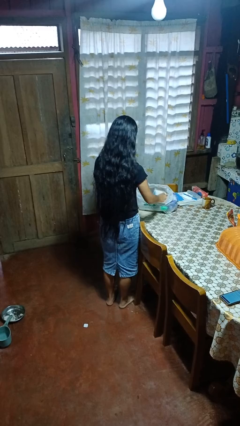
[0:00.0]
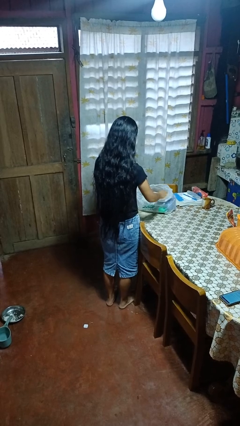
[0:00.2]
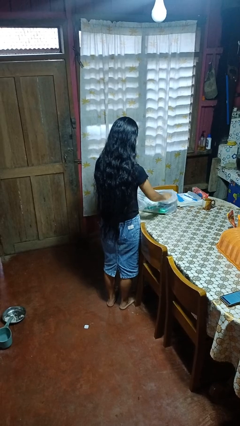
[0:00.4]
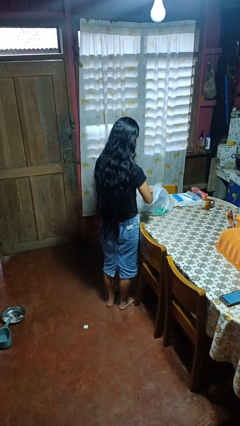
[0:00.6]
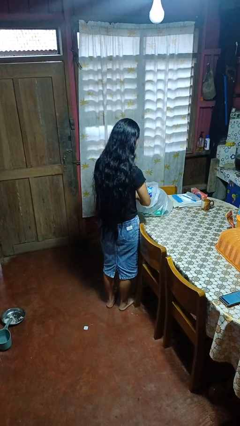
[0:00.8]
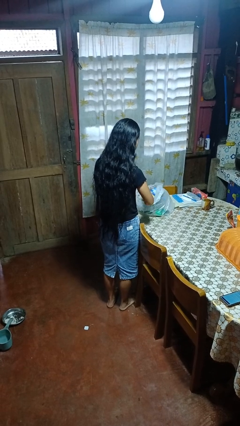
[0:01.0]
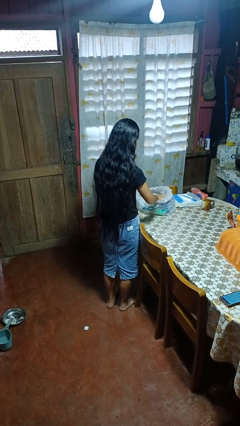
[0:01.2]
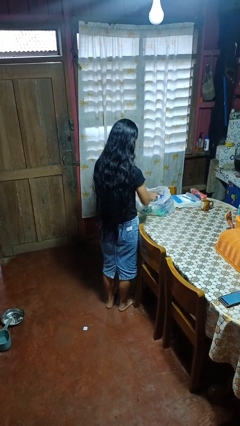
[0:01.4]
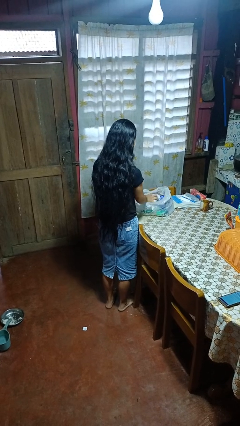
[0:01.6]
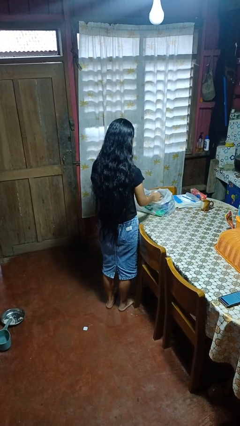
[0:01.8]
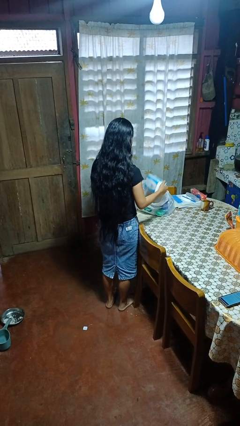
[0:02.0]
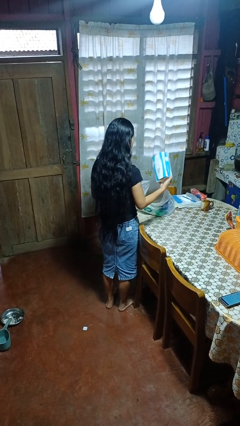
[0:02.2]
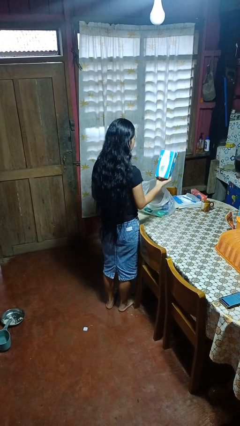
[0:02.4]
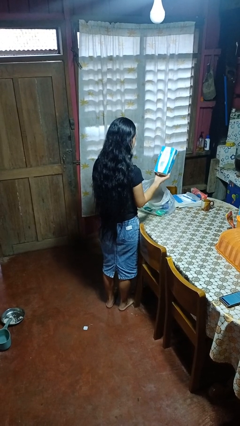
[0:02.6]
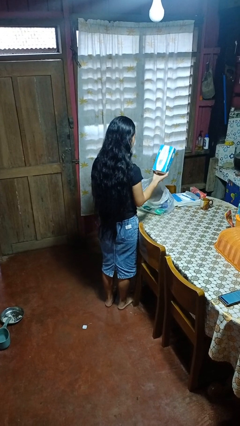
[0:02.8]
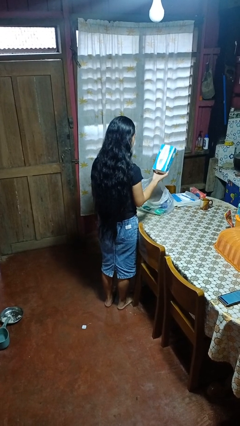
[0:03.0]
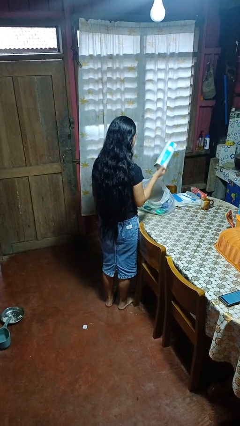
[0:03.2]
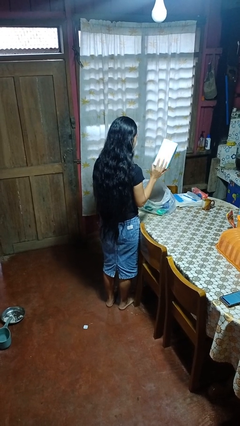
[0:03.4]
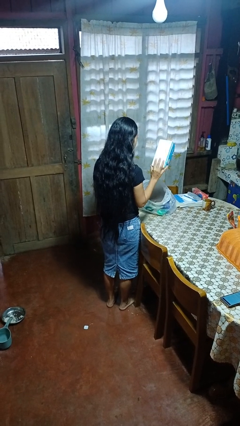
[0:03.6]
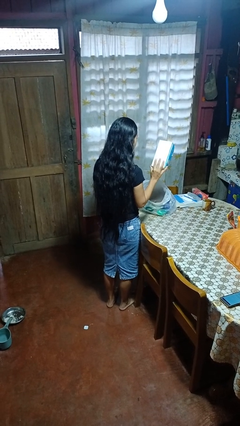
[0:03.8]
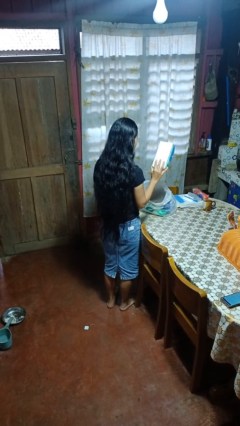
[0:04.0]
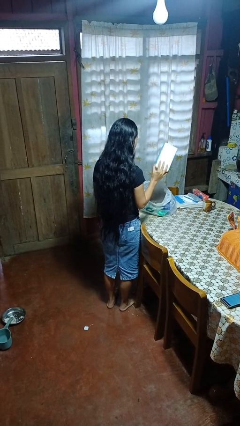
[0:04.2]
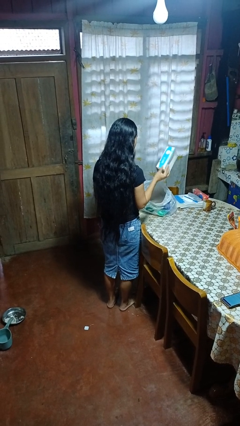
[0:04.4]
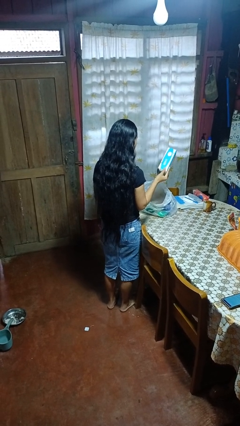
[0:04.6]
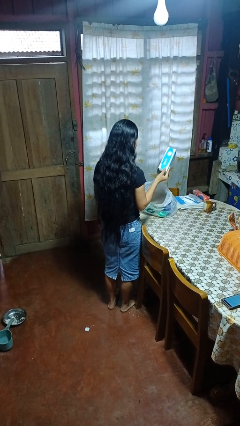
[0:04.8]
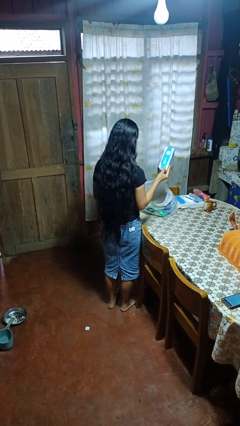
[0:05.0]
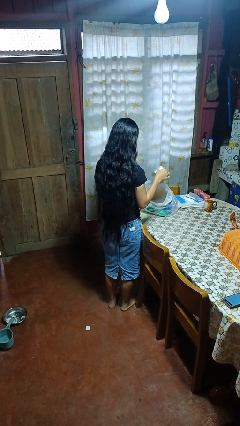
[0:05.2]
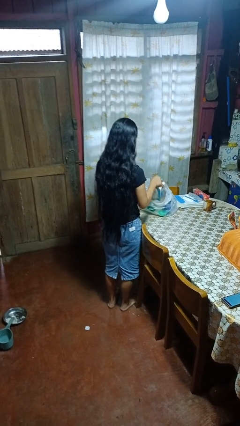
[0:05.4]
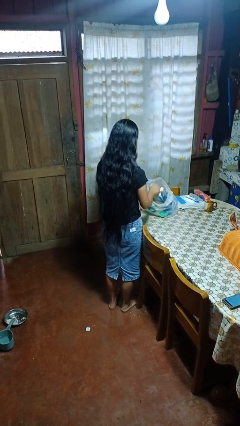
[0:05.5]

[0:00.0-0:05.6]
person takes object from bag

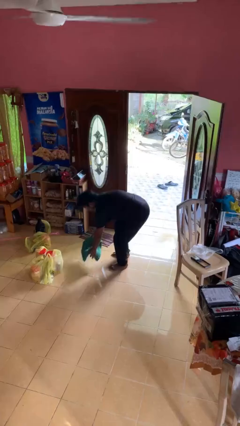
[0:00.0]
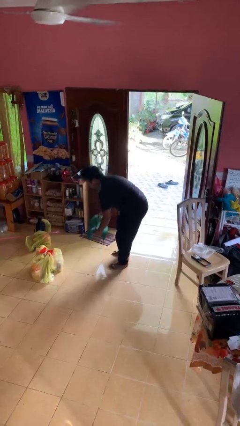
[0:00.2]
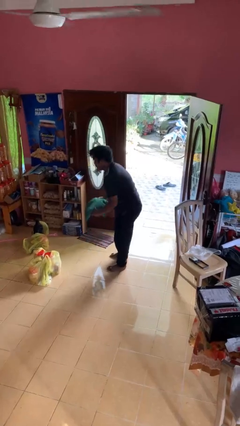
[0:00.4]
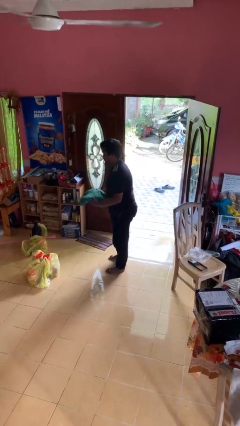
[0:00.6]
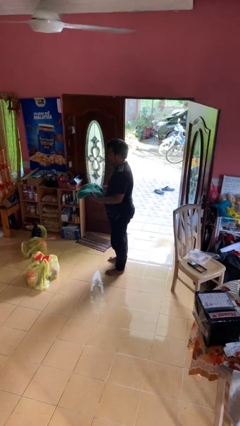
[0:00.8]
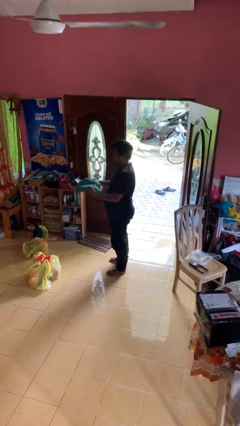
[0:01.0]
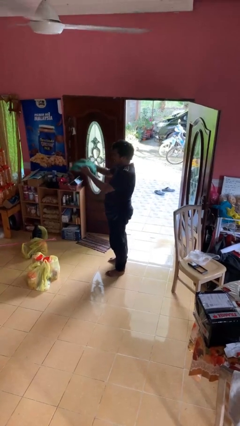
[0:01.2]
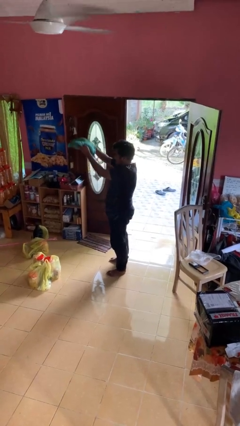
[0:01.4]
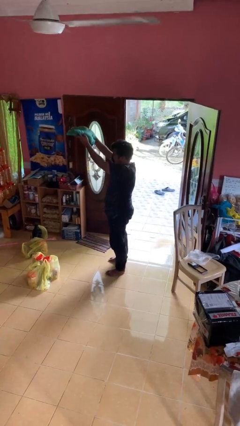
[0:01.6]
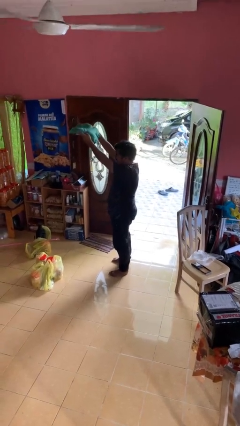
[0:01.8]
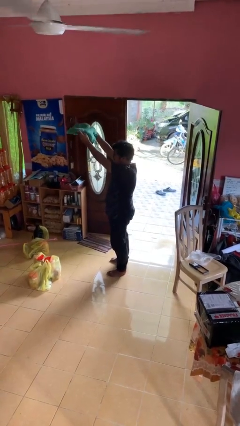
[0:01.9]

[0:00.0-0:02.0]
person picks up object from floor

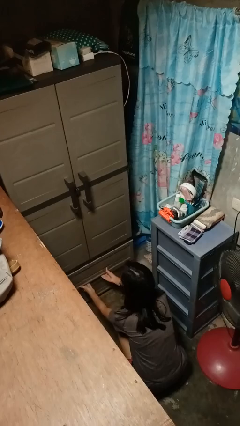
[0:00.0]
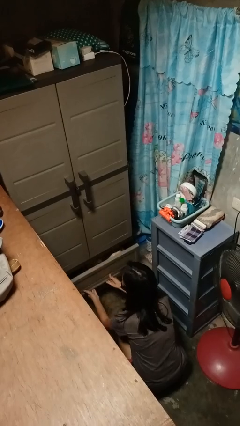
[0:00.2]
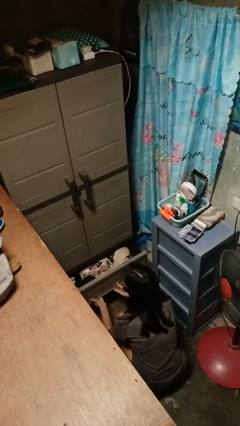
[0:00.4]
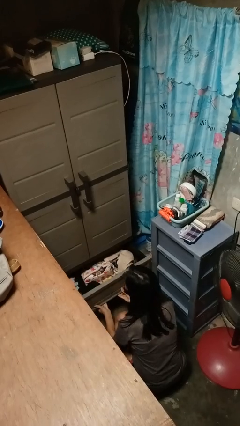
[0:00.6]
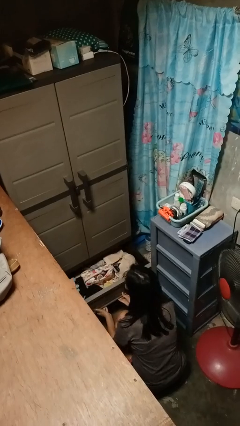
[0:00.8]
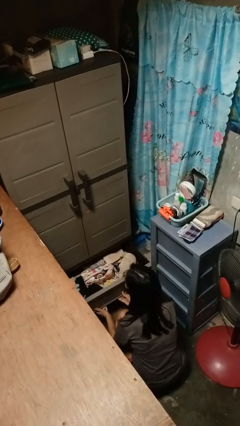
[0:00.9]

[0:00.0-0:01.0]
person opens dresser drawer

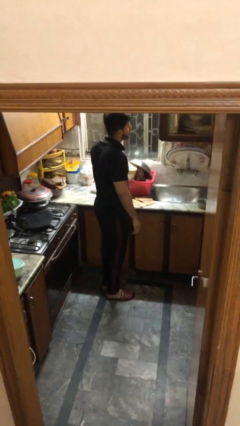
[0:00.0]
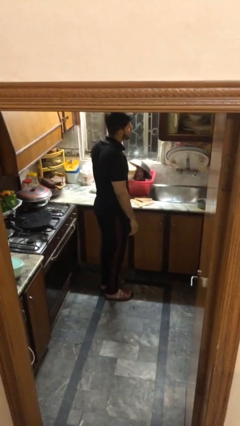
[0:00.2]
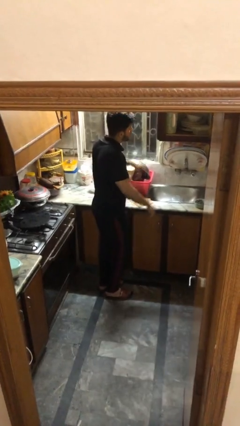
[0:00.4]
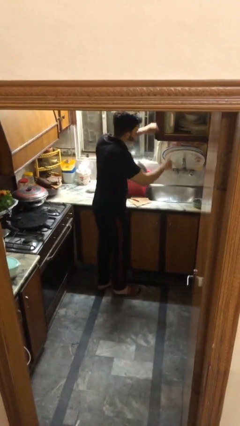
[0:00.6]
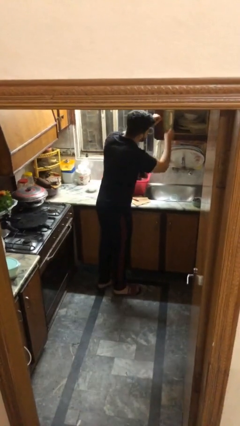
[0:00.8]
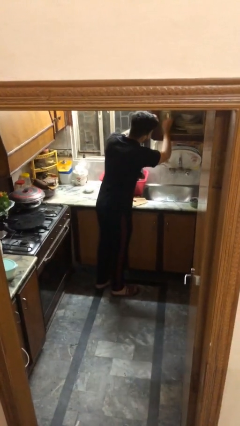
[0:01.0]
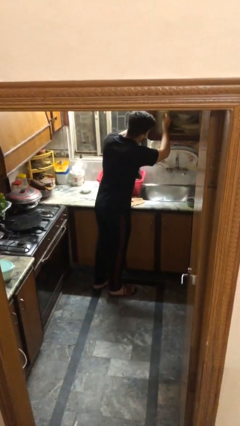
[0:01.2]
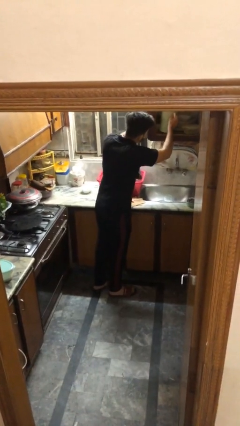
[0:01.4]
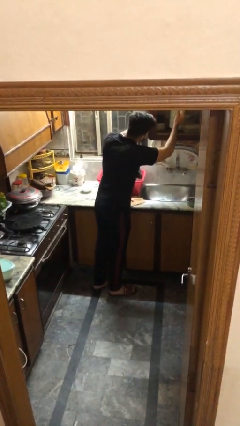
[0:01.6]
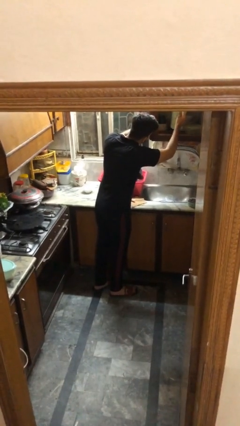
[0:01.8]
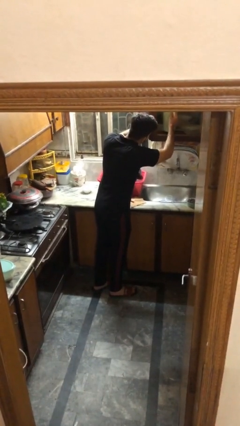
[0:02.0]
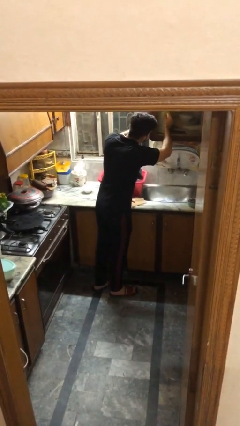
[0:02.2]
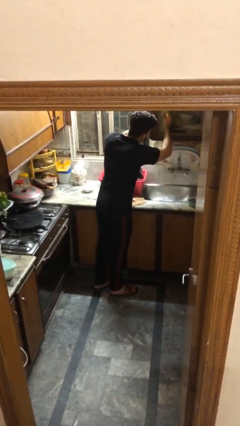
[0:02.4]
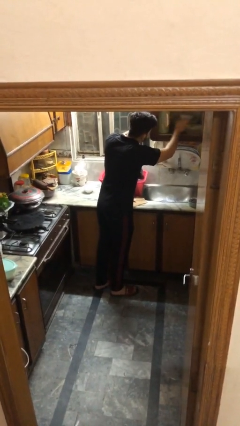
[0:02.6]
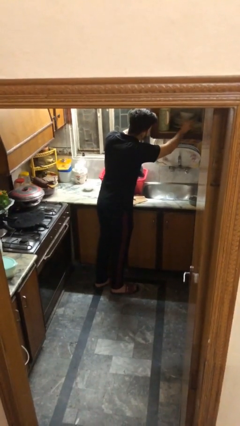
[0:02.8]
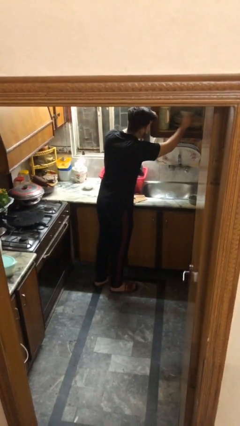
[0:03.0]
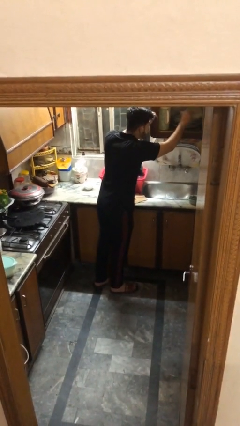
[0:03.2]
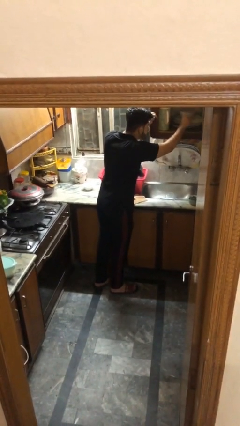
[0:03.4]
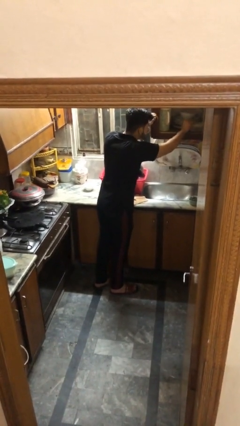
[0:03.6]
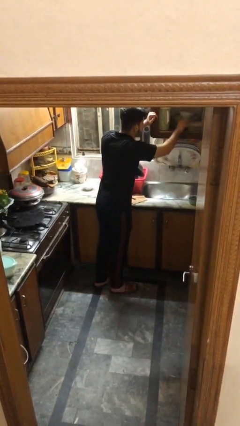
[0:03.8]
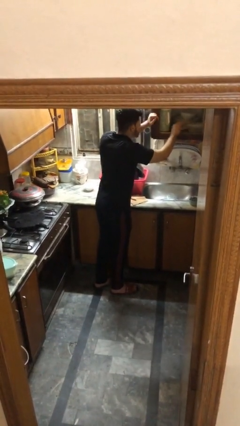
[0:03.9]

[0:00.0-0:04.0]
person searches in kitchen drawer

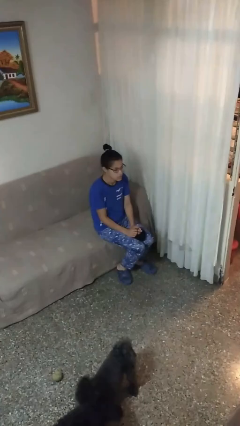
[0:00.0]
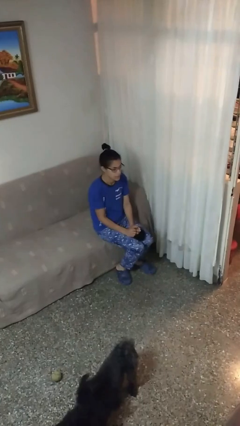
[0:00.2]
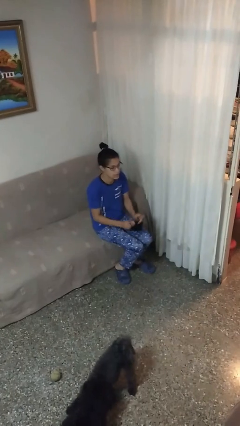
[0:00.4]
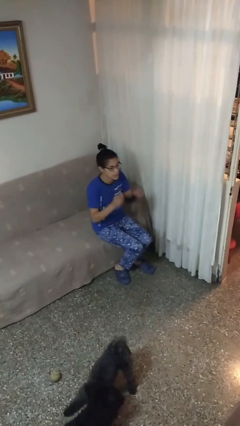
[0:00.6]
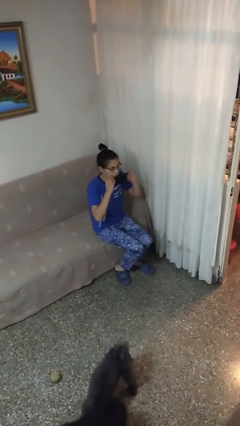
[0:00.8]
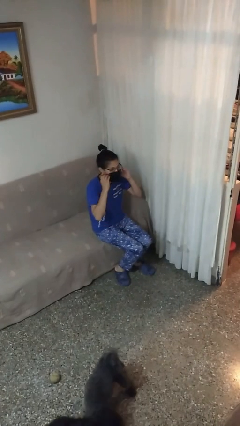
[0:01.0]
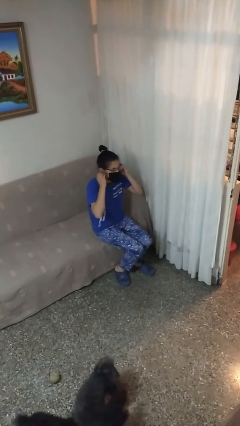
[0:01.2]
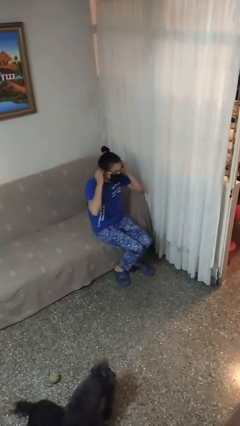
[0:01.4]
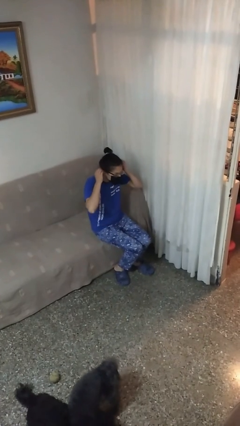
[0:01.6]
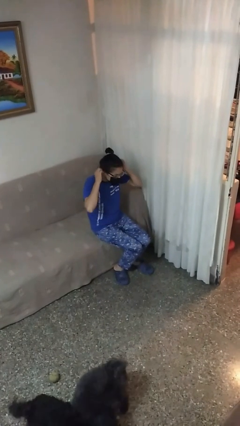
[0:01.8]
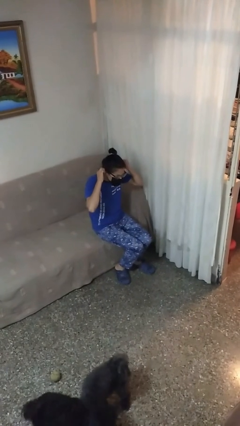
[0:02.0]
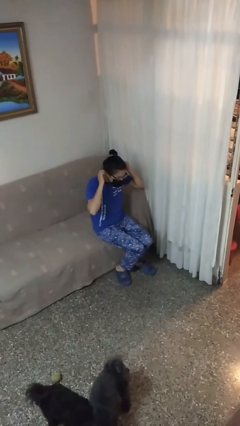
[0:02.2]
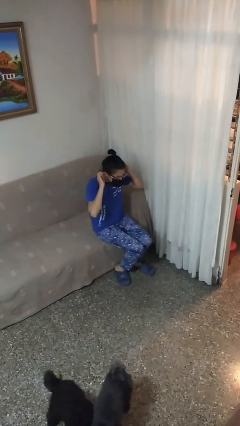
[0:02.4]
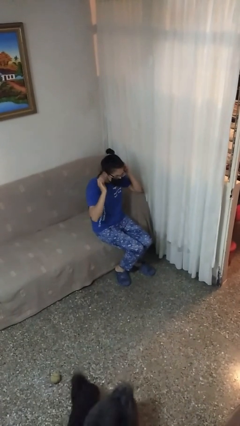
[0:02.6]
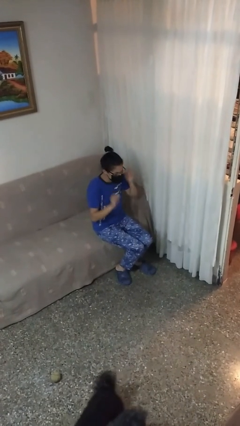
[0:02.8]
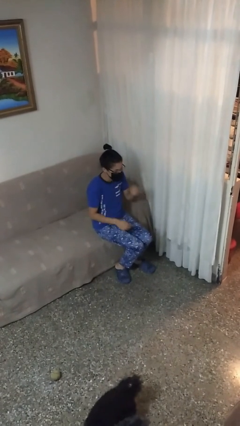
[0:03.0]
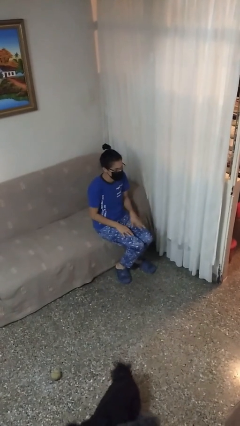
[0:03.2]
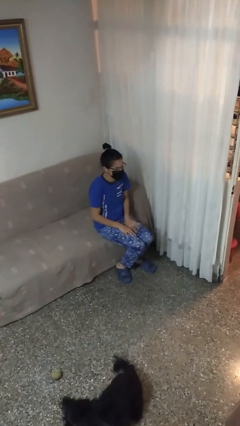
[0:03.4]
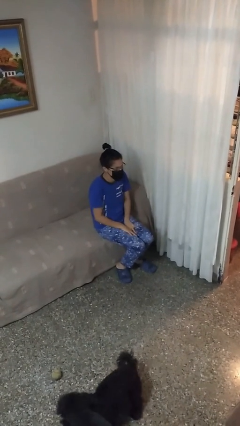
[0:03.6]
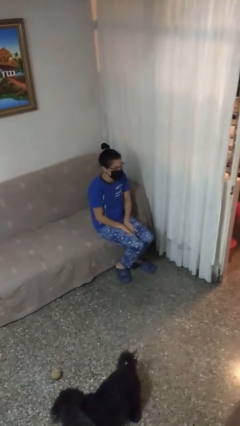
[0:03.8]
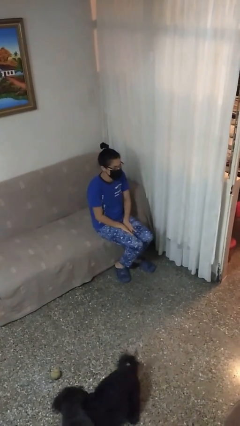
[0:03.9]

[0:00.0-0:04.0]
person puts on facemask

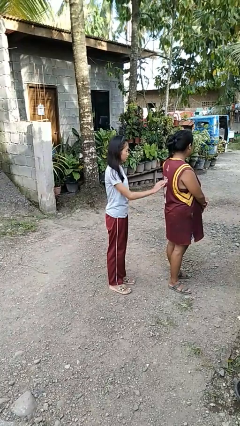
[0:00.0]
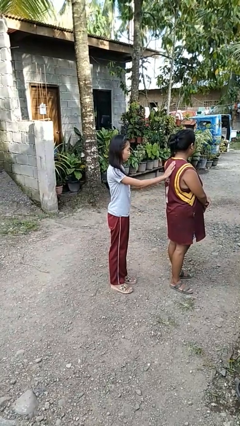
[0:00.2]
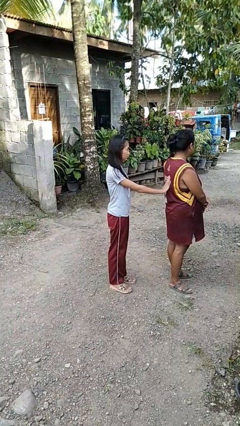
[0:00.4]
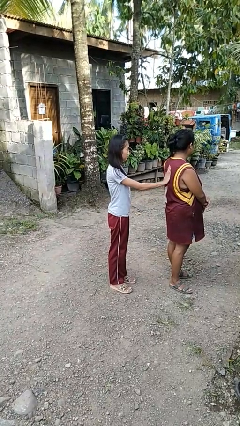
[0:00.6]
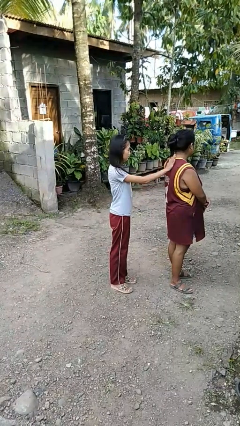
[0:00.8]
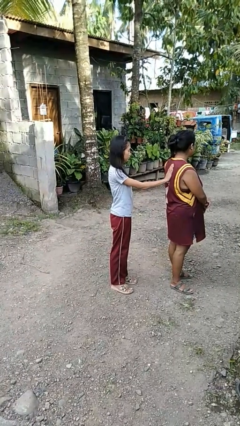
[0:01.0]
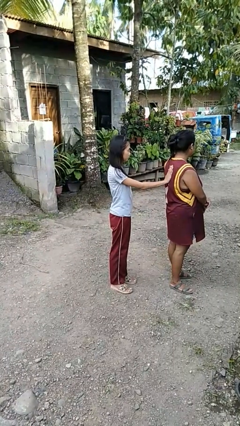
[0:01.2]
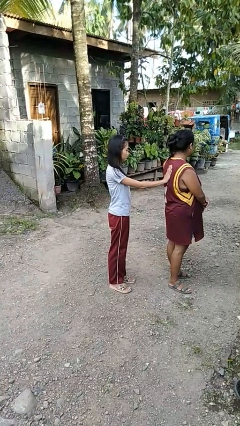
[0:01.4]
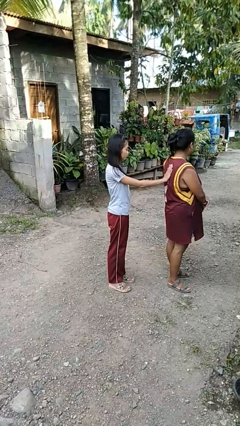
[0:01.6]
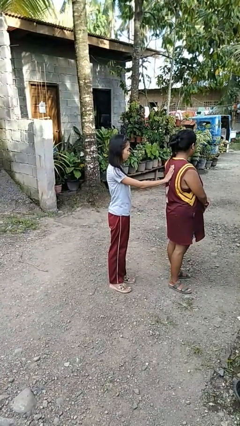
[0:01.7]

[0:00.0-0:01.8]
person touches back of person
